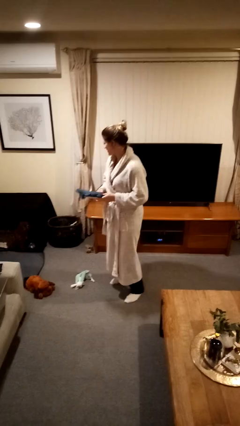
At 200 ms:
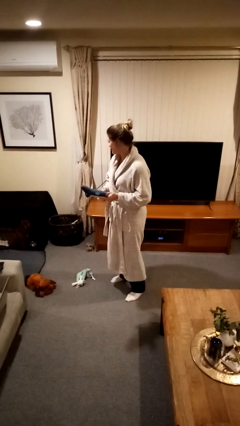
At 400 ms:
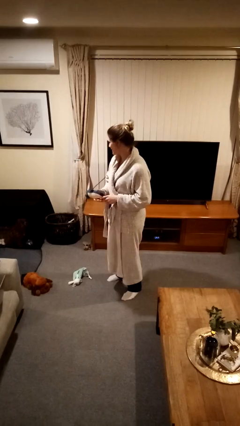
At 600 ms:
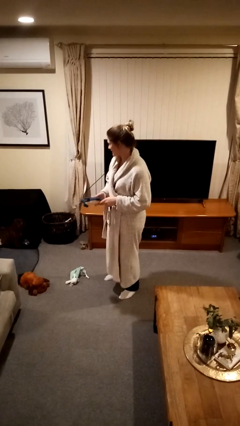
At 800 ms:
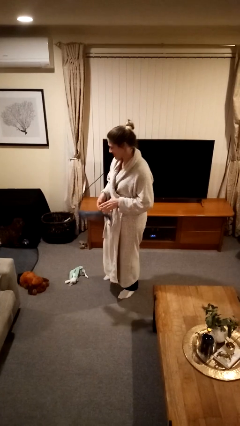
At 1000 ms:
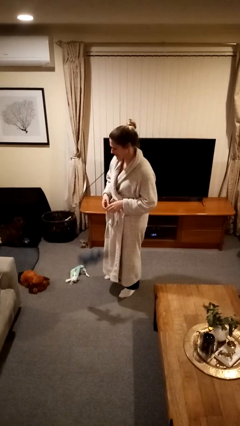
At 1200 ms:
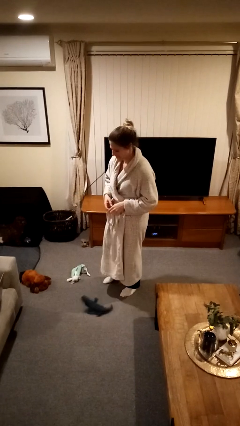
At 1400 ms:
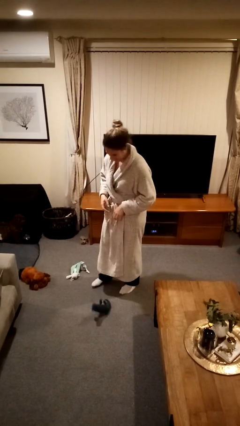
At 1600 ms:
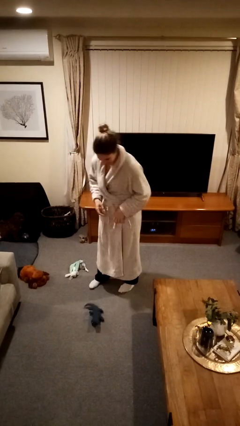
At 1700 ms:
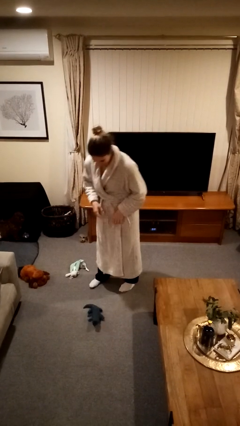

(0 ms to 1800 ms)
person drops object

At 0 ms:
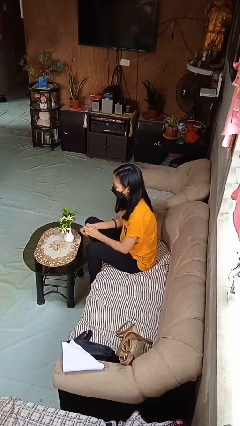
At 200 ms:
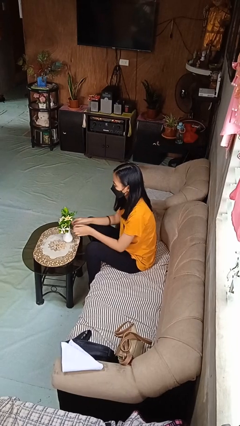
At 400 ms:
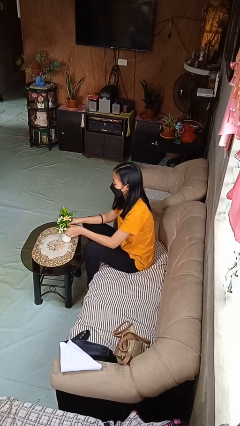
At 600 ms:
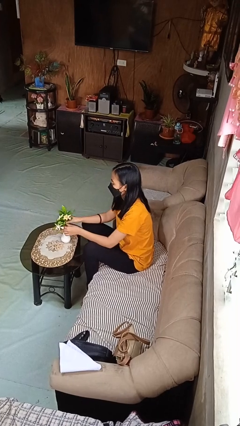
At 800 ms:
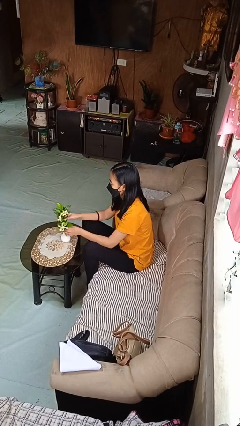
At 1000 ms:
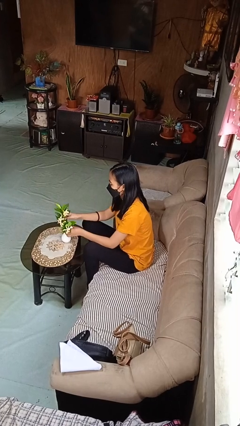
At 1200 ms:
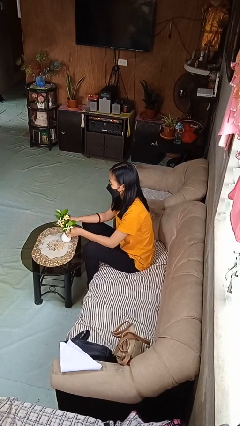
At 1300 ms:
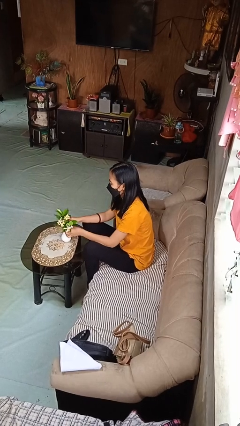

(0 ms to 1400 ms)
person arranges flowers in vase

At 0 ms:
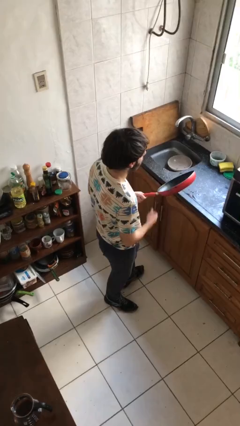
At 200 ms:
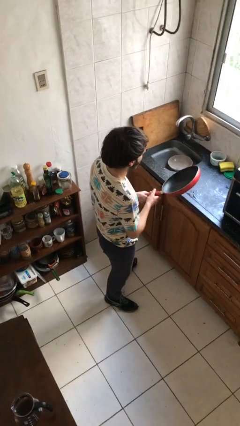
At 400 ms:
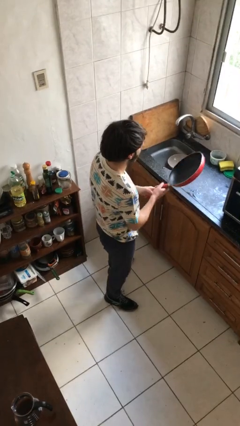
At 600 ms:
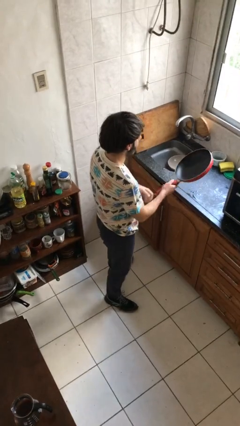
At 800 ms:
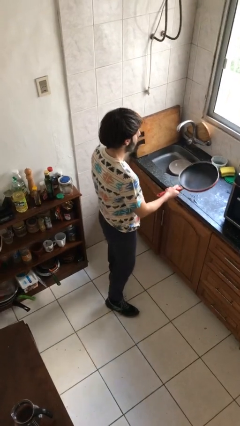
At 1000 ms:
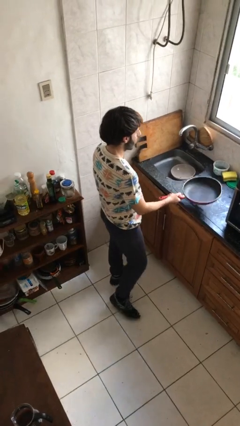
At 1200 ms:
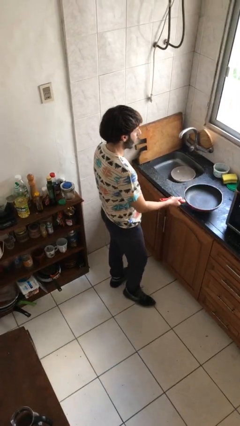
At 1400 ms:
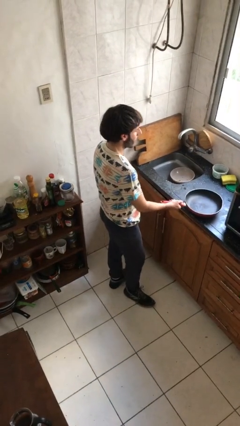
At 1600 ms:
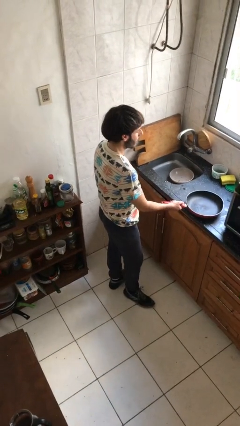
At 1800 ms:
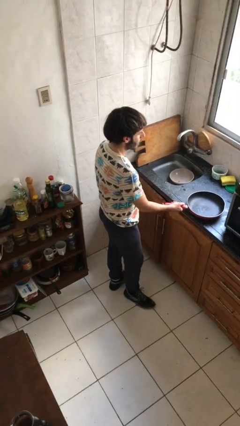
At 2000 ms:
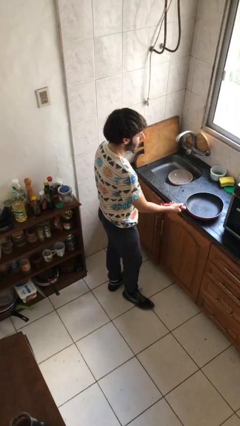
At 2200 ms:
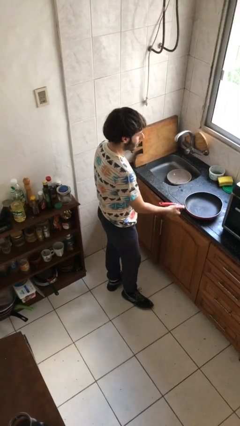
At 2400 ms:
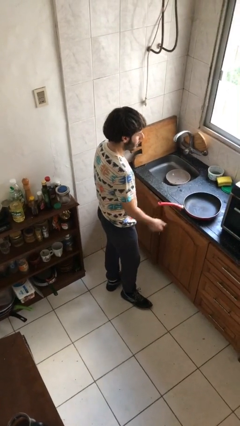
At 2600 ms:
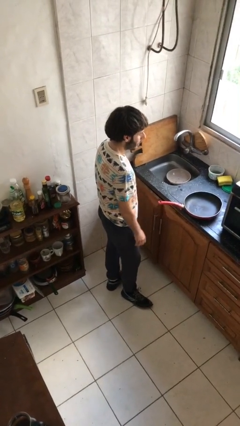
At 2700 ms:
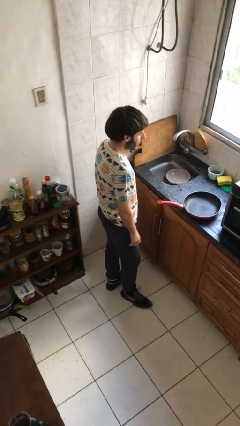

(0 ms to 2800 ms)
person puts down object on countertop

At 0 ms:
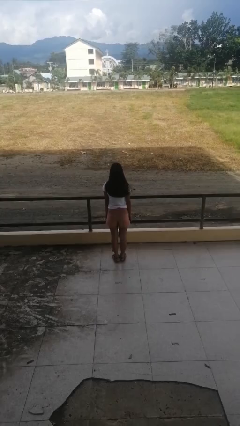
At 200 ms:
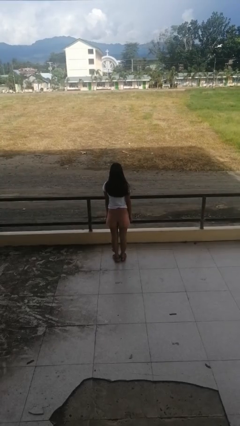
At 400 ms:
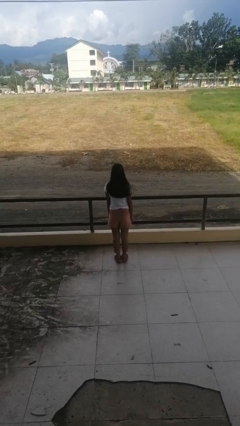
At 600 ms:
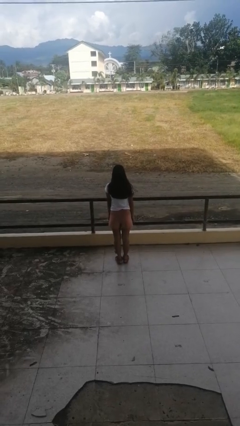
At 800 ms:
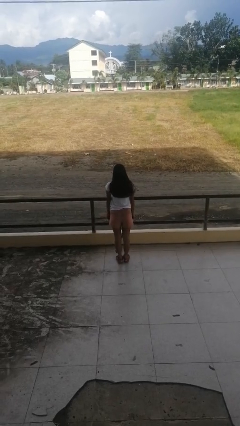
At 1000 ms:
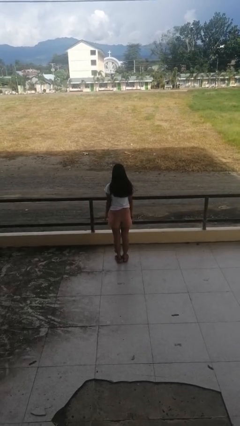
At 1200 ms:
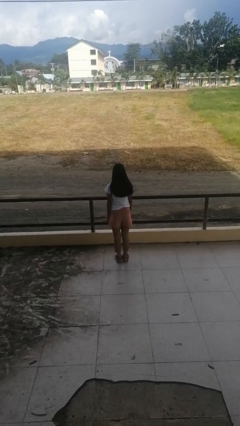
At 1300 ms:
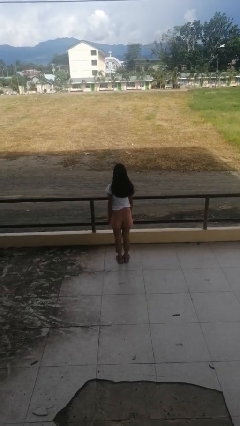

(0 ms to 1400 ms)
person shrugs

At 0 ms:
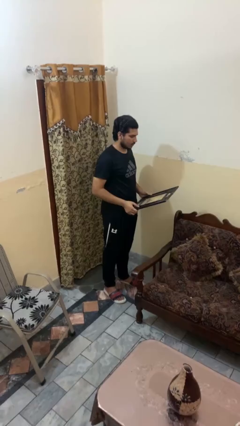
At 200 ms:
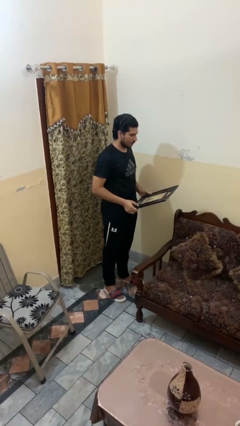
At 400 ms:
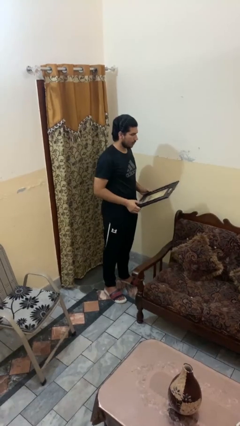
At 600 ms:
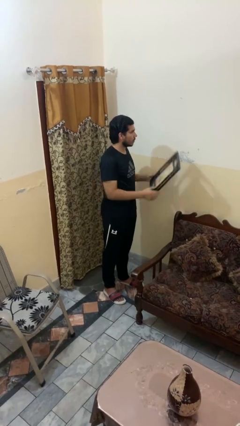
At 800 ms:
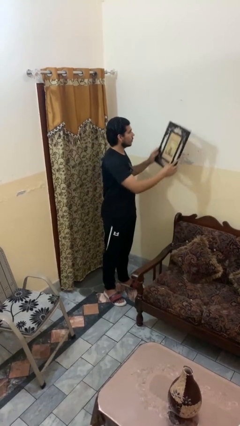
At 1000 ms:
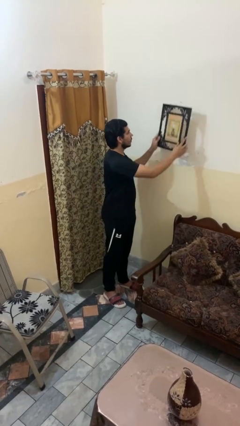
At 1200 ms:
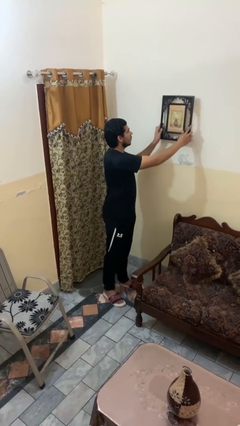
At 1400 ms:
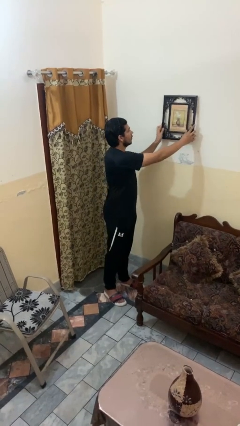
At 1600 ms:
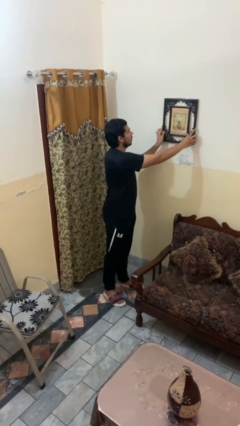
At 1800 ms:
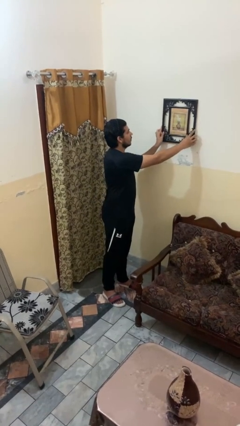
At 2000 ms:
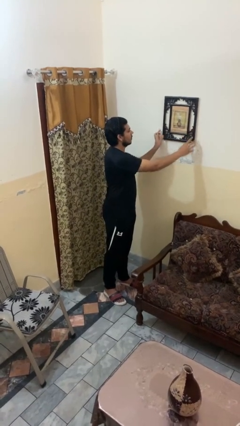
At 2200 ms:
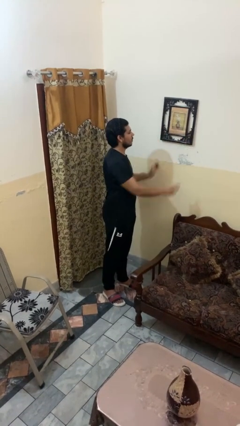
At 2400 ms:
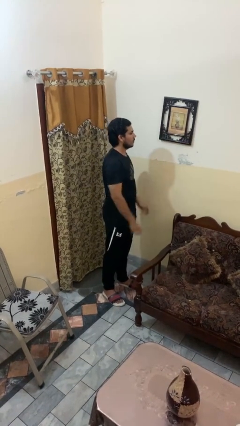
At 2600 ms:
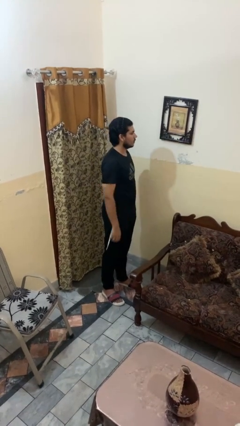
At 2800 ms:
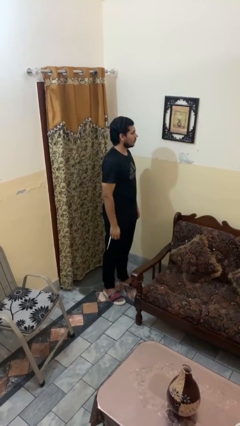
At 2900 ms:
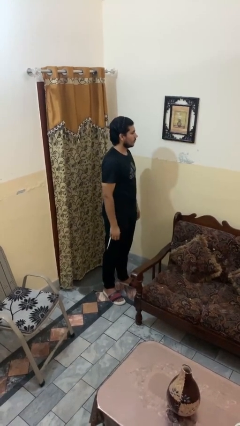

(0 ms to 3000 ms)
person puts up picture frame

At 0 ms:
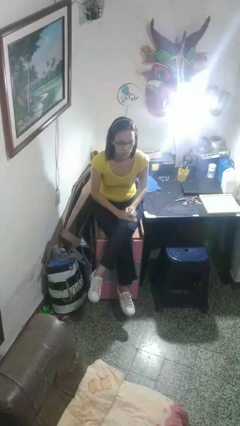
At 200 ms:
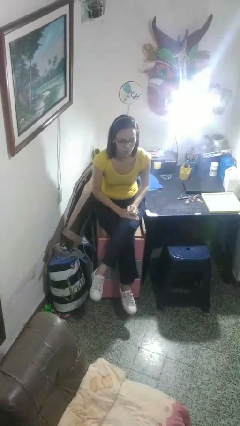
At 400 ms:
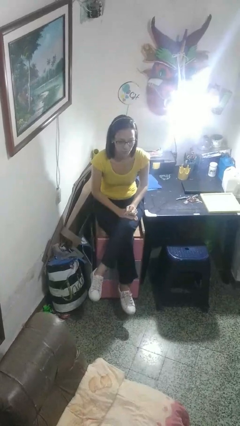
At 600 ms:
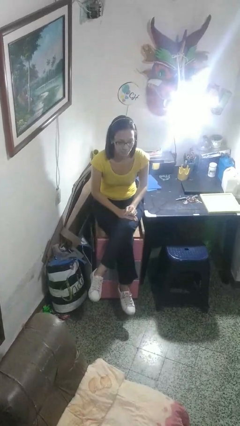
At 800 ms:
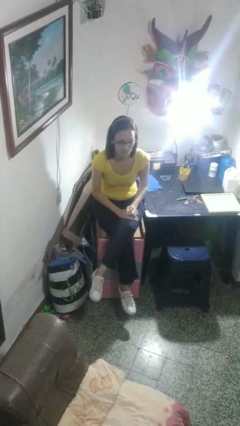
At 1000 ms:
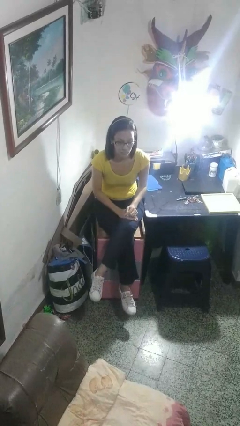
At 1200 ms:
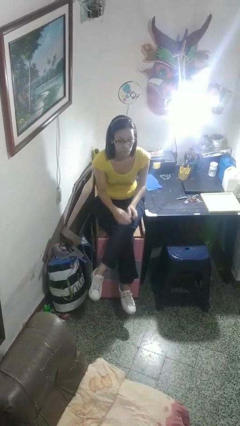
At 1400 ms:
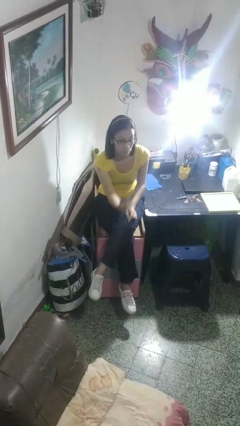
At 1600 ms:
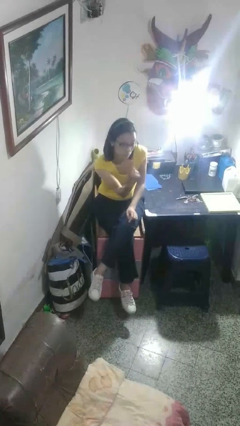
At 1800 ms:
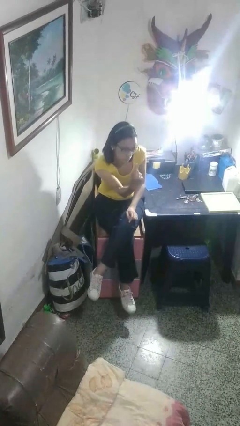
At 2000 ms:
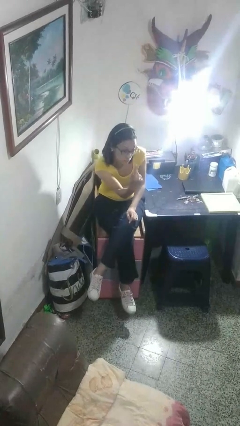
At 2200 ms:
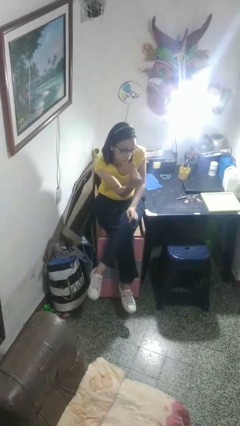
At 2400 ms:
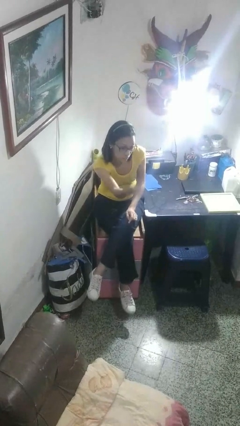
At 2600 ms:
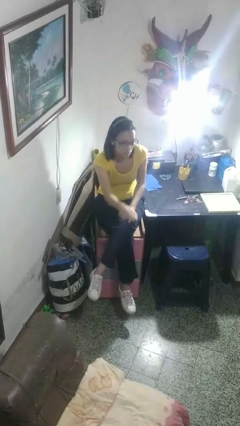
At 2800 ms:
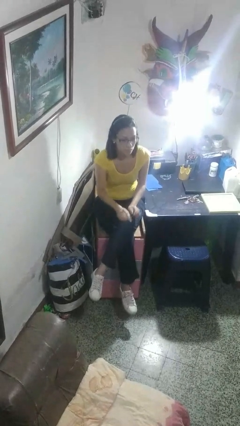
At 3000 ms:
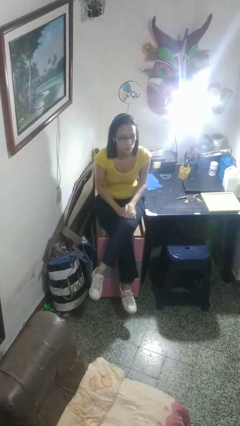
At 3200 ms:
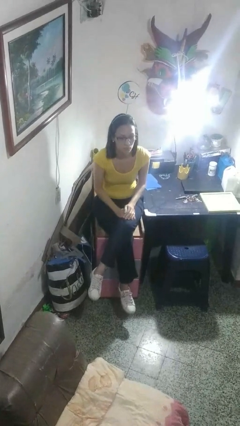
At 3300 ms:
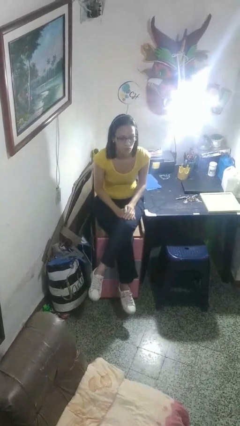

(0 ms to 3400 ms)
person gestures number one

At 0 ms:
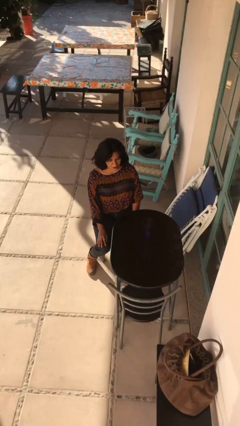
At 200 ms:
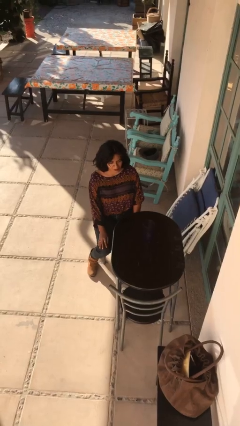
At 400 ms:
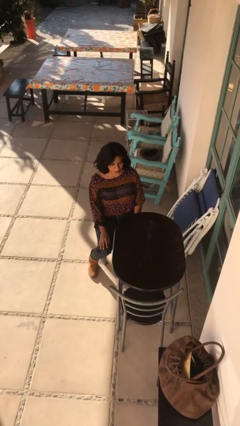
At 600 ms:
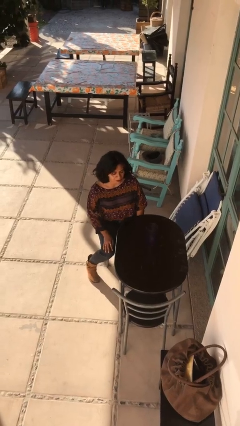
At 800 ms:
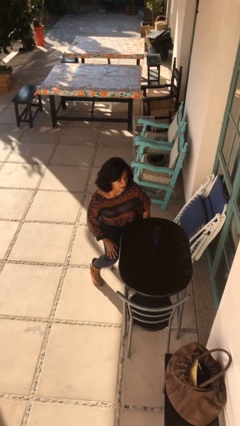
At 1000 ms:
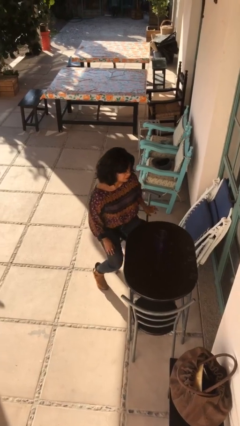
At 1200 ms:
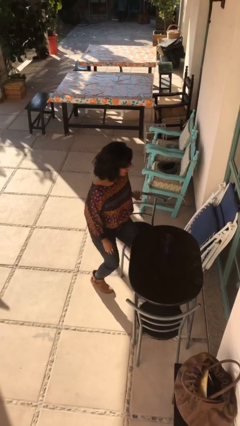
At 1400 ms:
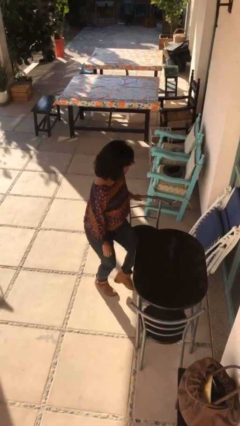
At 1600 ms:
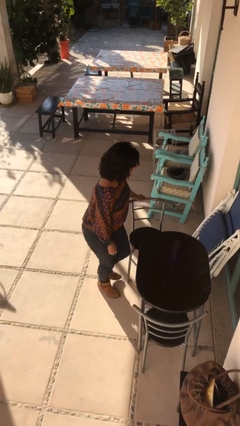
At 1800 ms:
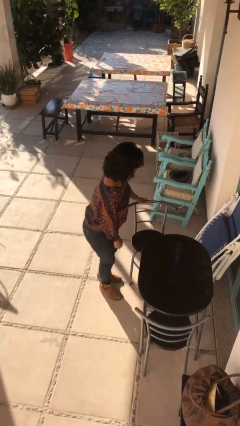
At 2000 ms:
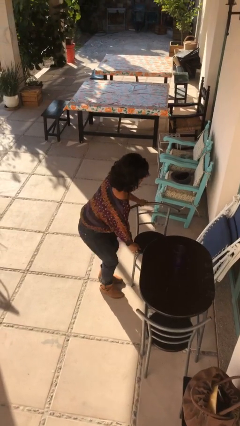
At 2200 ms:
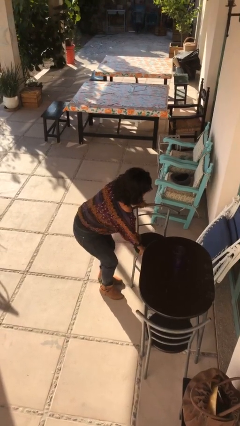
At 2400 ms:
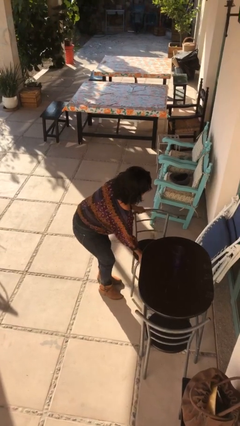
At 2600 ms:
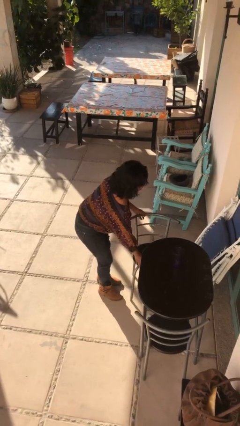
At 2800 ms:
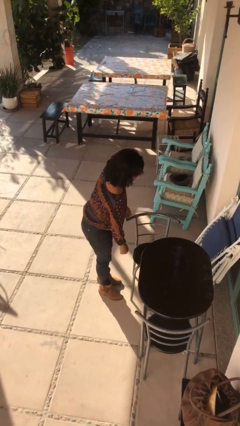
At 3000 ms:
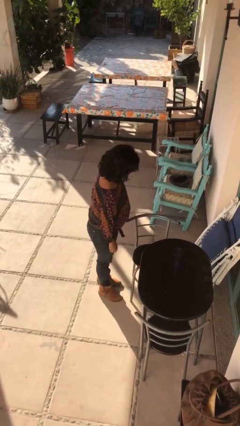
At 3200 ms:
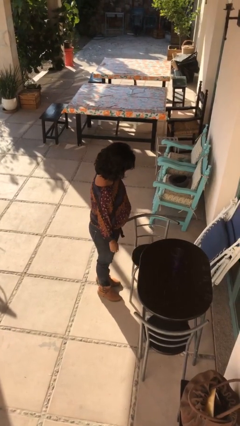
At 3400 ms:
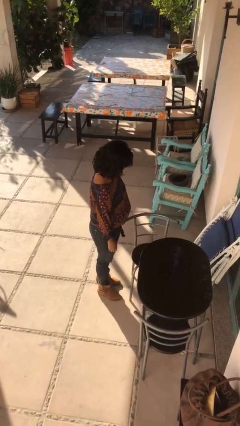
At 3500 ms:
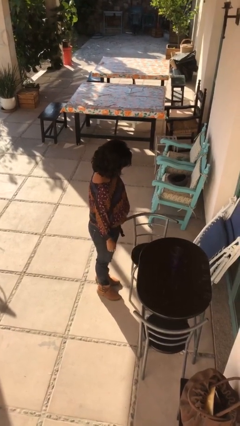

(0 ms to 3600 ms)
person stands up
